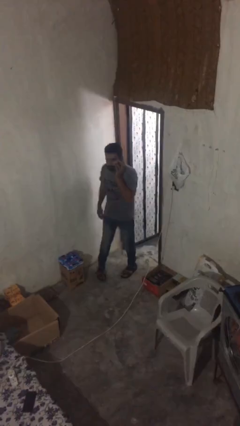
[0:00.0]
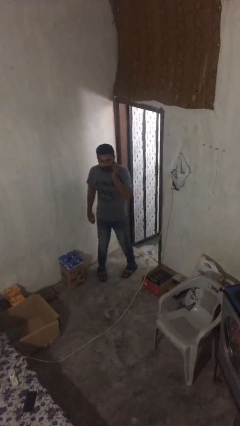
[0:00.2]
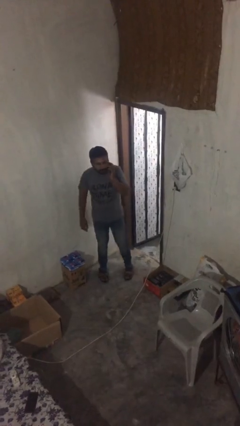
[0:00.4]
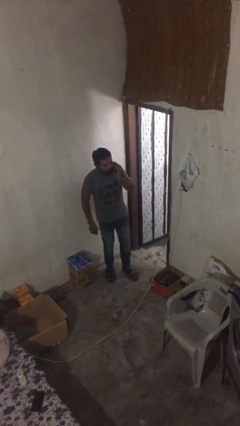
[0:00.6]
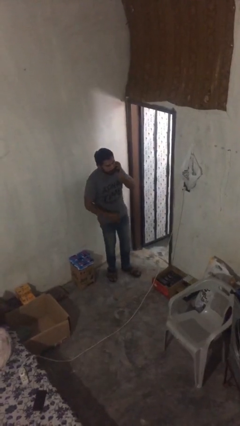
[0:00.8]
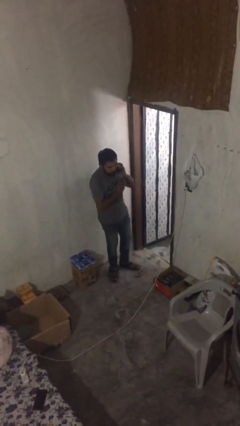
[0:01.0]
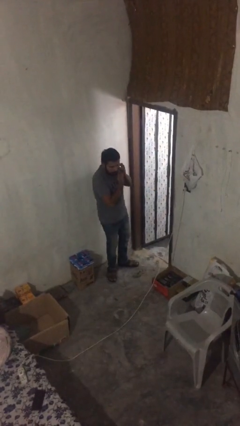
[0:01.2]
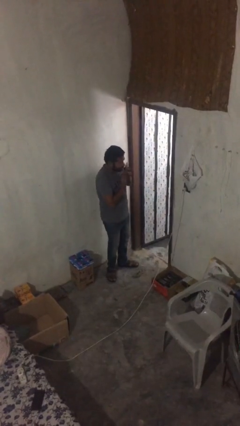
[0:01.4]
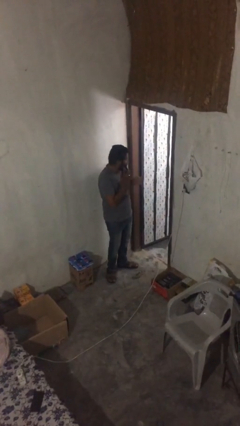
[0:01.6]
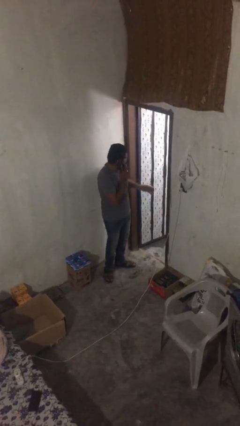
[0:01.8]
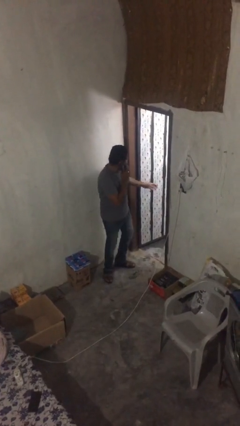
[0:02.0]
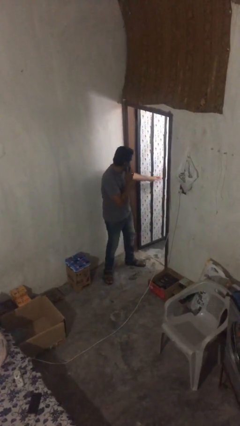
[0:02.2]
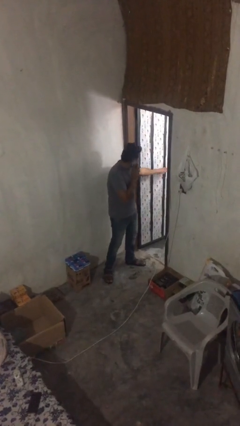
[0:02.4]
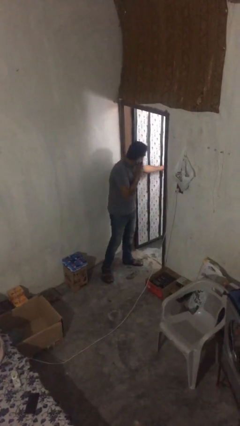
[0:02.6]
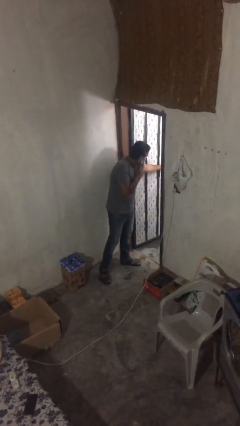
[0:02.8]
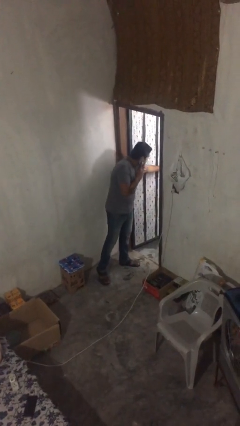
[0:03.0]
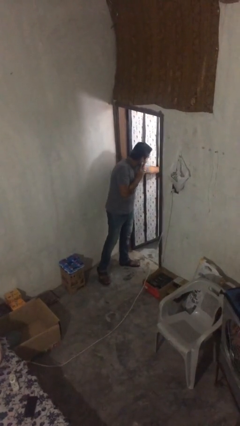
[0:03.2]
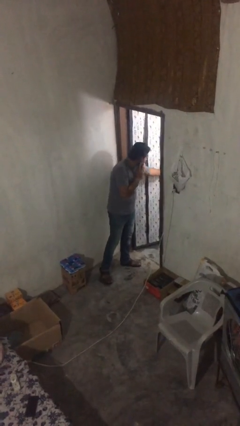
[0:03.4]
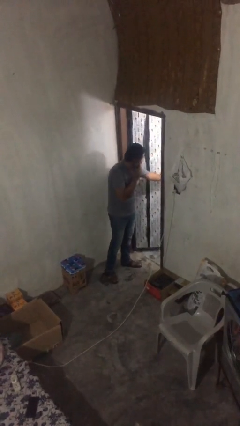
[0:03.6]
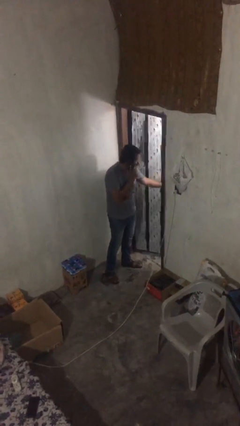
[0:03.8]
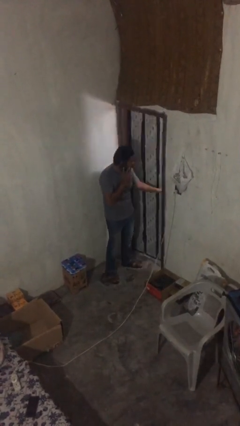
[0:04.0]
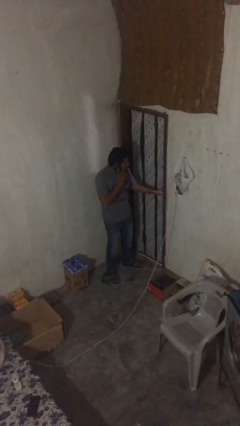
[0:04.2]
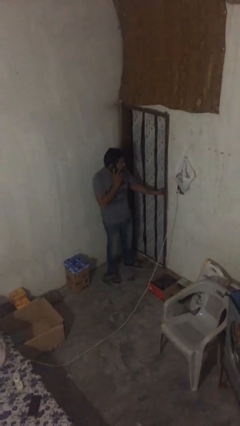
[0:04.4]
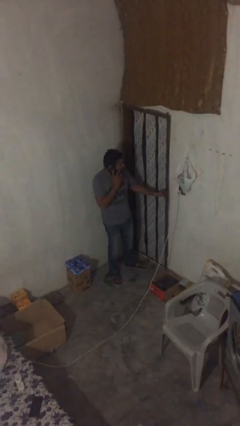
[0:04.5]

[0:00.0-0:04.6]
person closes facility door

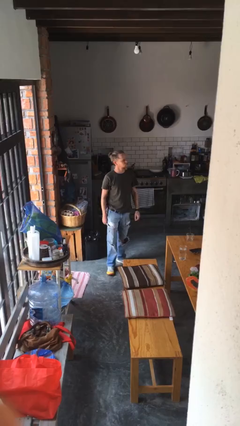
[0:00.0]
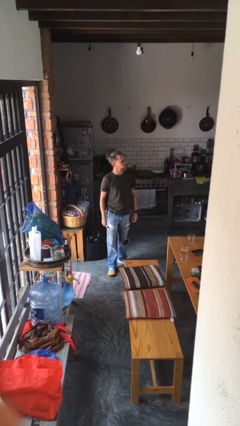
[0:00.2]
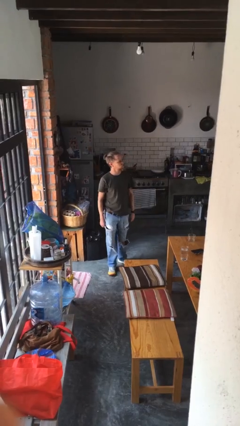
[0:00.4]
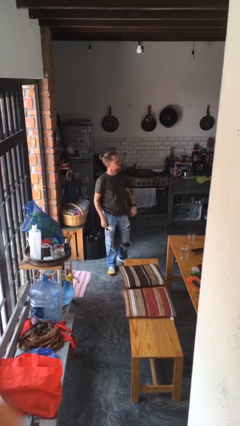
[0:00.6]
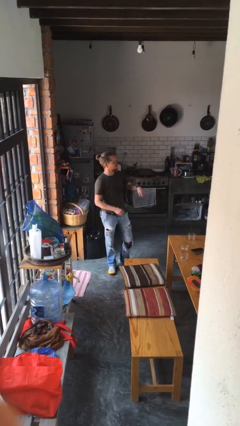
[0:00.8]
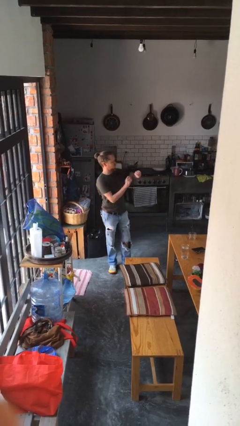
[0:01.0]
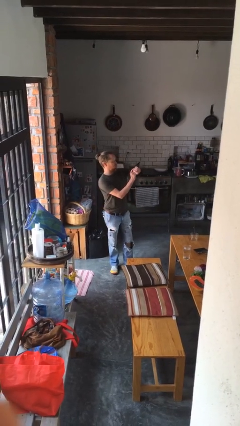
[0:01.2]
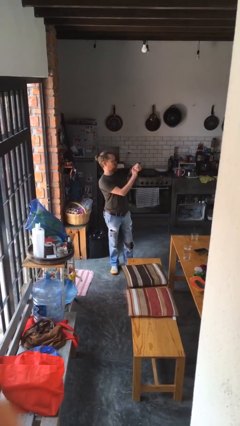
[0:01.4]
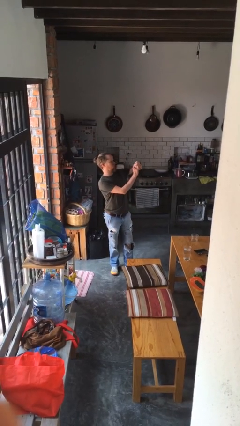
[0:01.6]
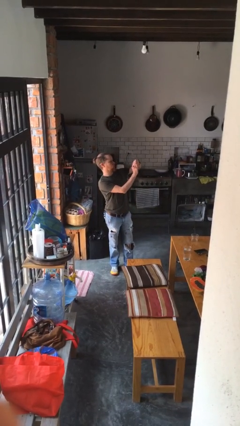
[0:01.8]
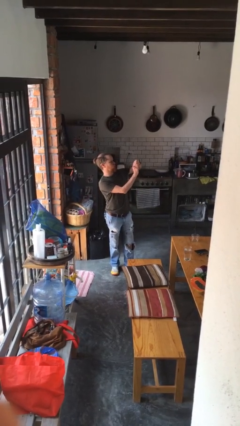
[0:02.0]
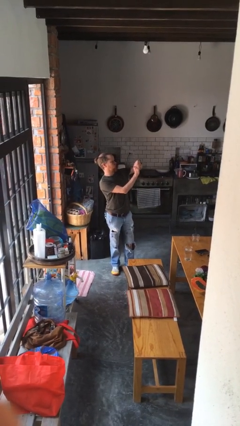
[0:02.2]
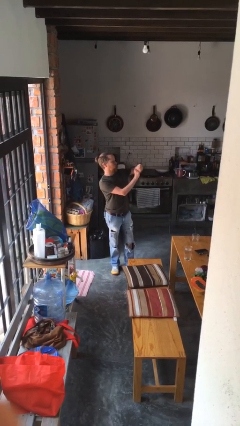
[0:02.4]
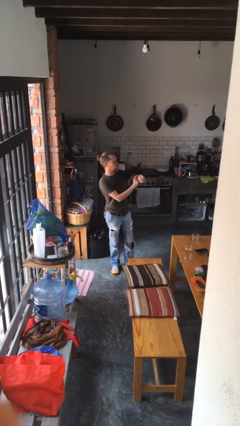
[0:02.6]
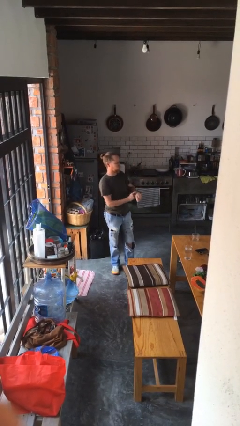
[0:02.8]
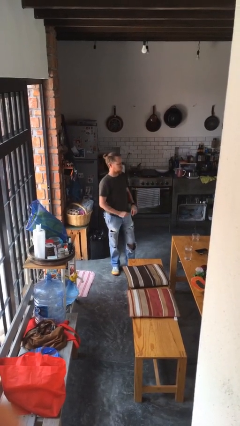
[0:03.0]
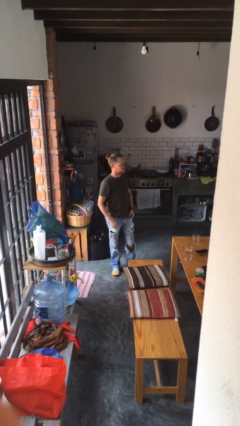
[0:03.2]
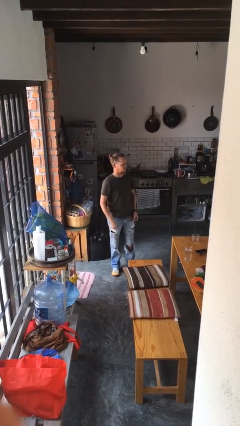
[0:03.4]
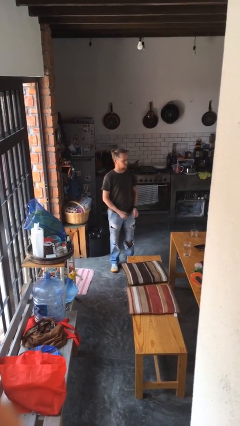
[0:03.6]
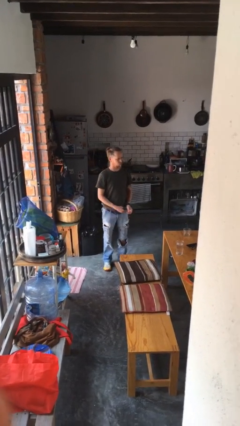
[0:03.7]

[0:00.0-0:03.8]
person looks at wristwatch

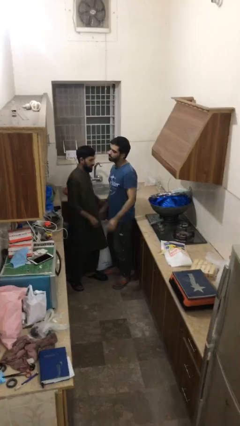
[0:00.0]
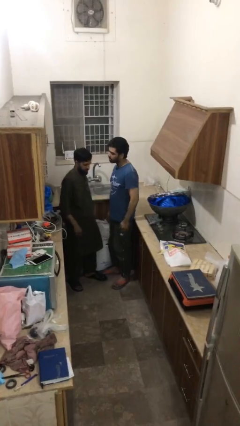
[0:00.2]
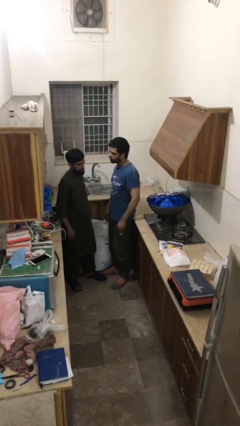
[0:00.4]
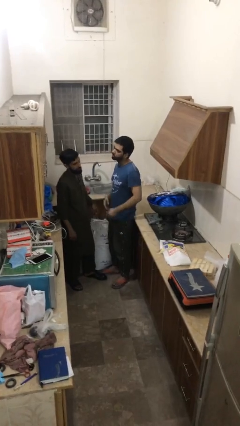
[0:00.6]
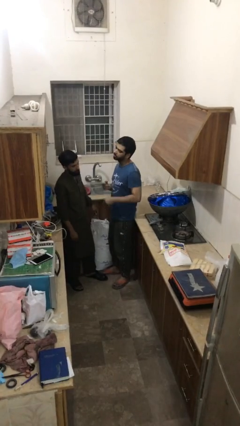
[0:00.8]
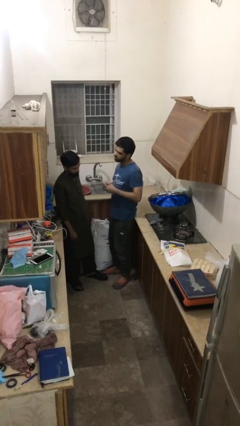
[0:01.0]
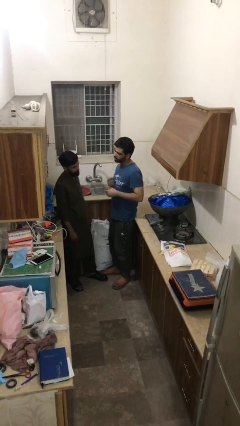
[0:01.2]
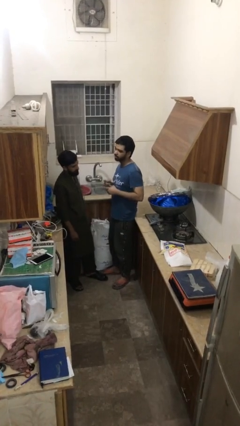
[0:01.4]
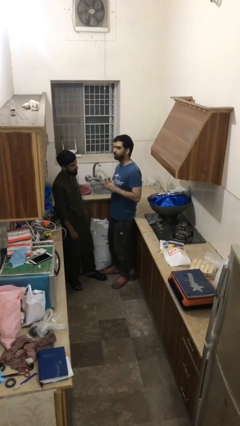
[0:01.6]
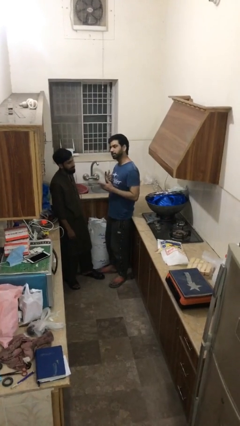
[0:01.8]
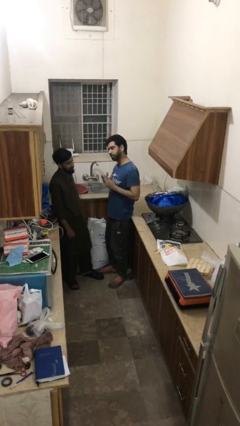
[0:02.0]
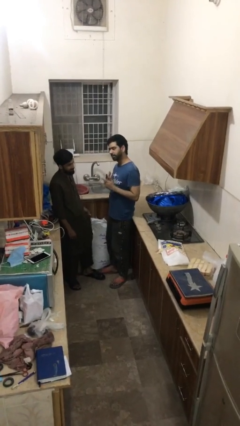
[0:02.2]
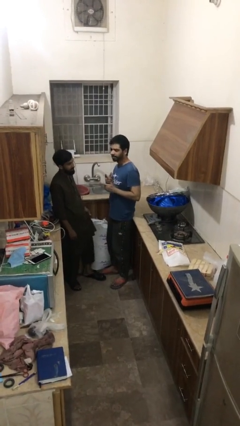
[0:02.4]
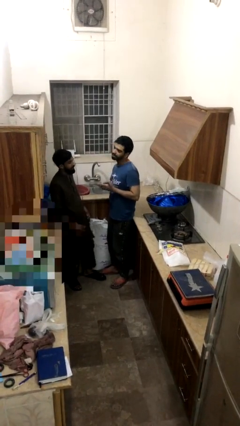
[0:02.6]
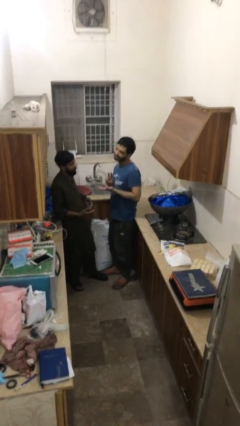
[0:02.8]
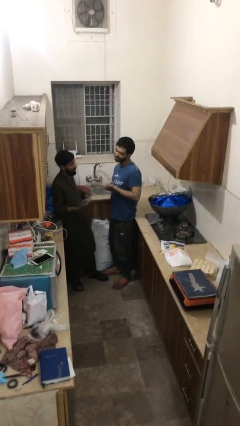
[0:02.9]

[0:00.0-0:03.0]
person talks to person

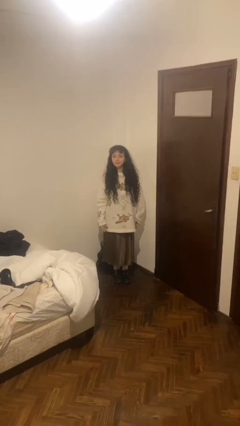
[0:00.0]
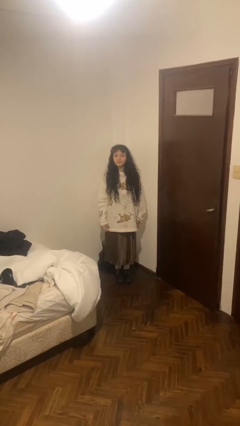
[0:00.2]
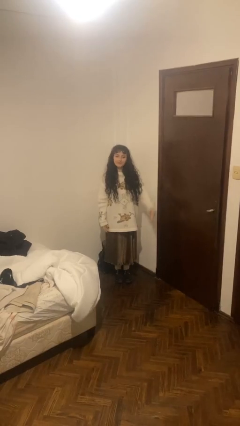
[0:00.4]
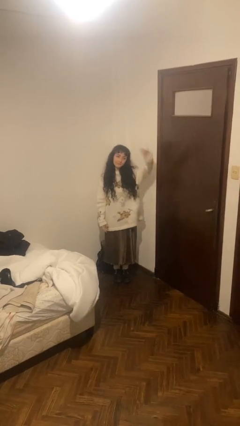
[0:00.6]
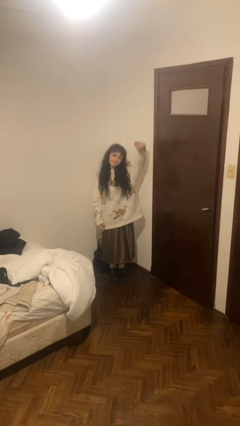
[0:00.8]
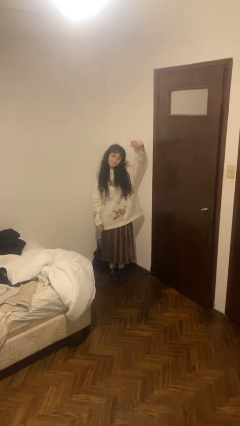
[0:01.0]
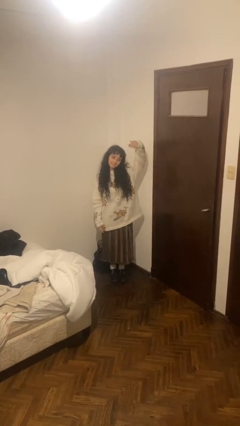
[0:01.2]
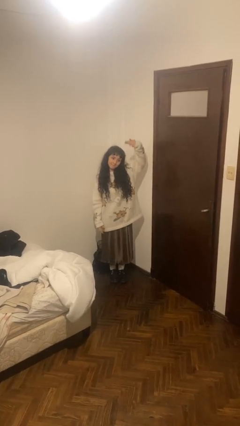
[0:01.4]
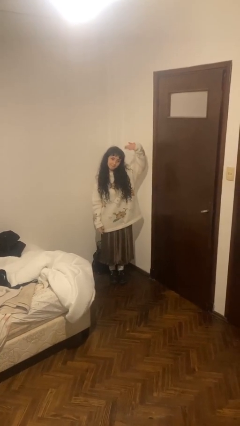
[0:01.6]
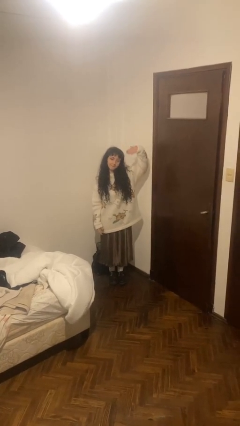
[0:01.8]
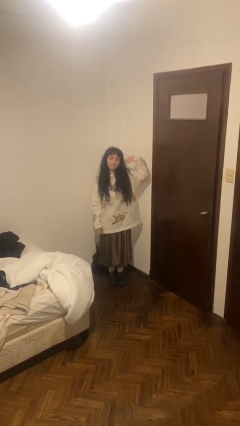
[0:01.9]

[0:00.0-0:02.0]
person gestures come here

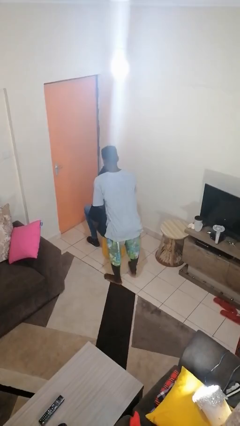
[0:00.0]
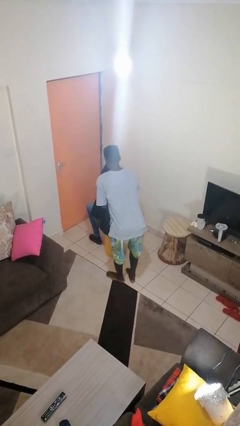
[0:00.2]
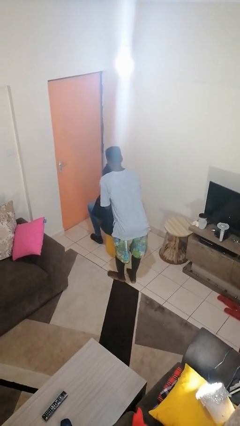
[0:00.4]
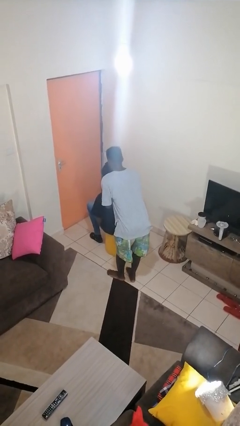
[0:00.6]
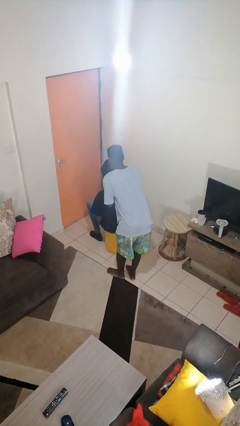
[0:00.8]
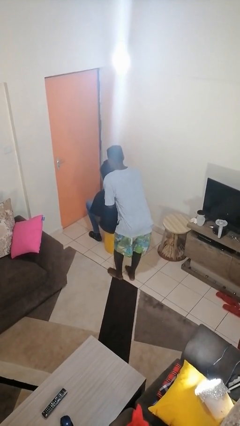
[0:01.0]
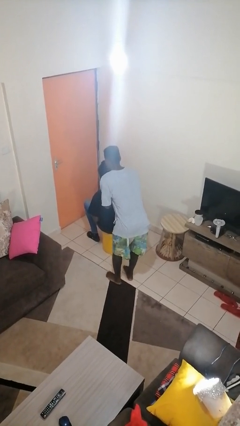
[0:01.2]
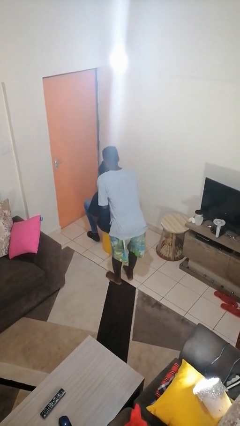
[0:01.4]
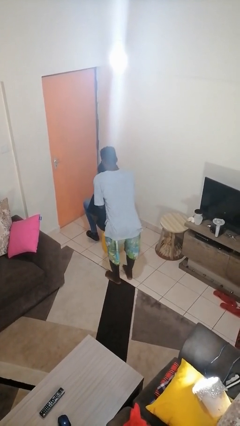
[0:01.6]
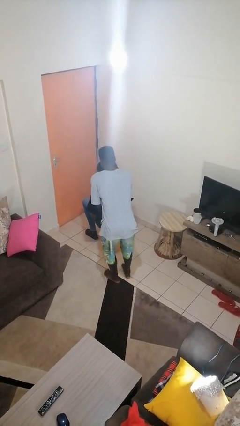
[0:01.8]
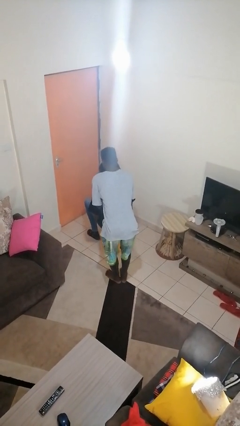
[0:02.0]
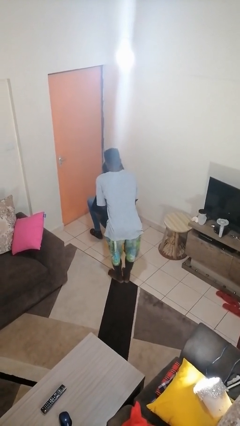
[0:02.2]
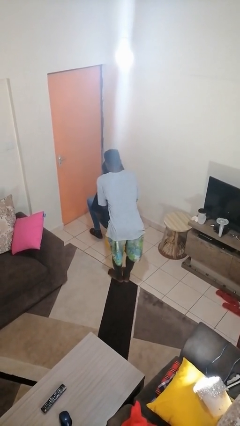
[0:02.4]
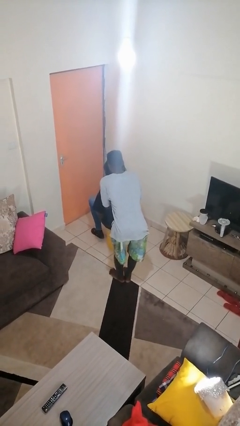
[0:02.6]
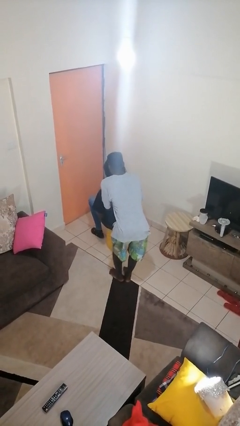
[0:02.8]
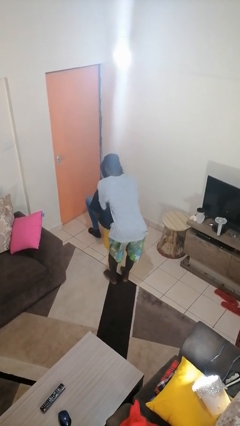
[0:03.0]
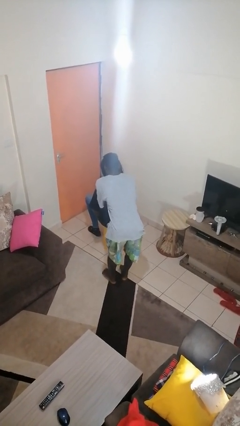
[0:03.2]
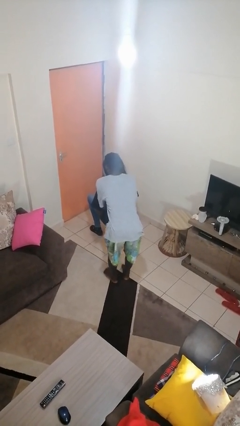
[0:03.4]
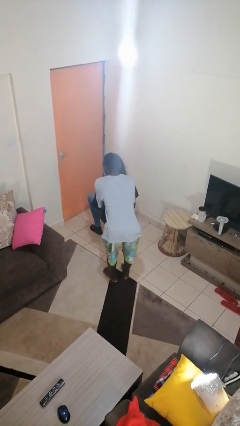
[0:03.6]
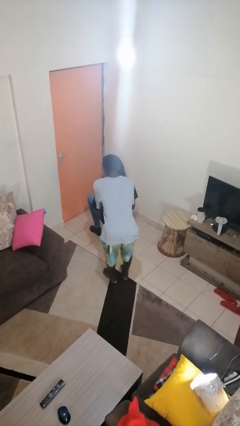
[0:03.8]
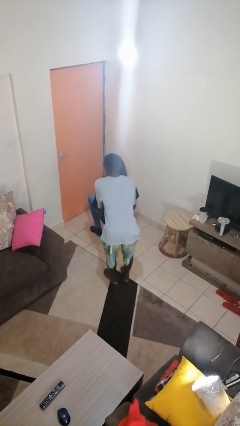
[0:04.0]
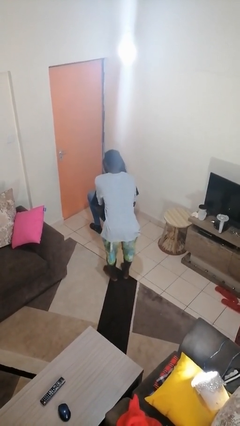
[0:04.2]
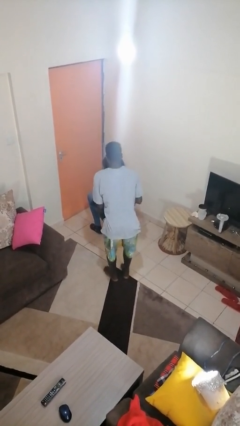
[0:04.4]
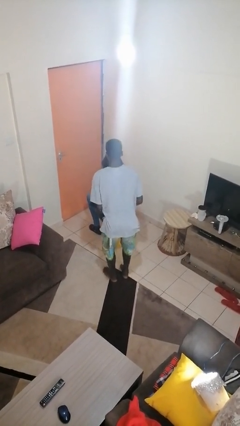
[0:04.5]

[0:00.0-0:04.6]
person braids hair of person
